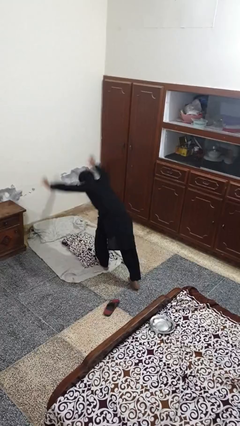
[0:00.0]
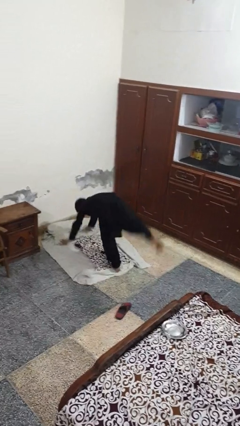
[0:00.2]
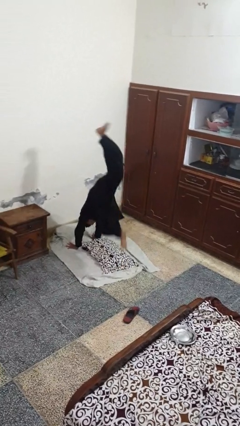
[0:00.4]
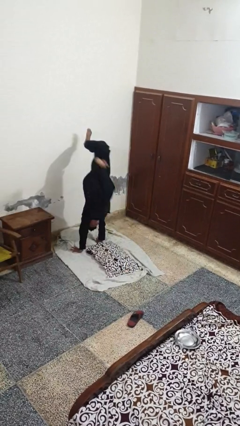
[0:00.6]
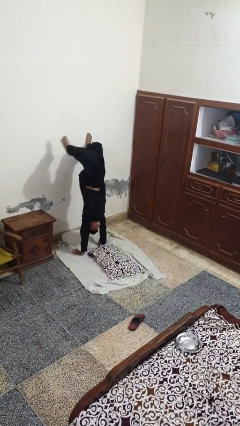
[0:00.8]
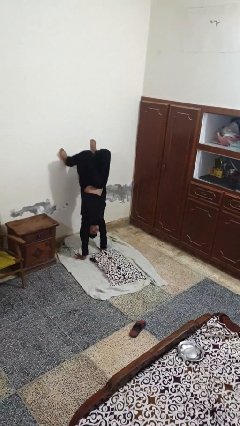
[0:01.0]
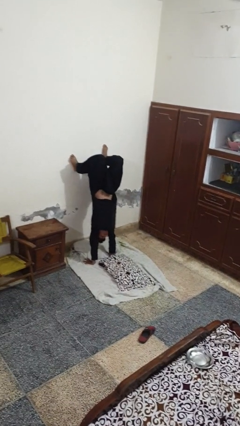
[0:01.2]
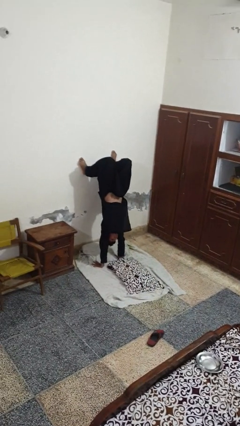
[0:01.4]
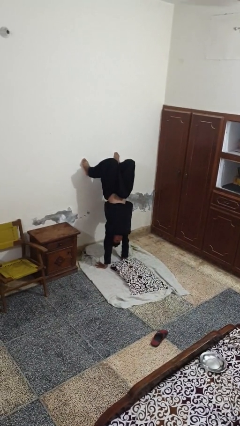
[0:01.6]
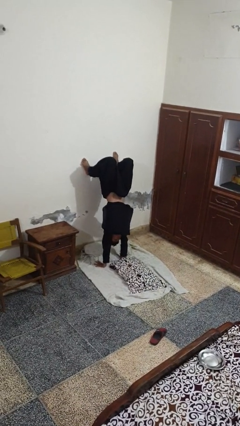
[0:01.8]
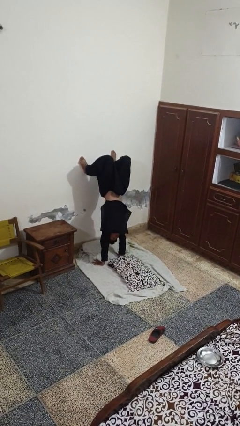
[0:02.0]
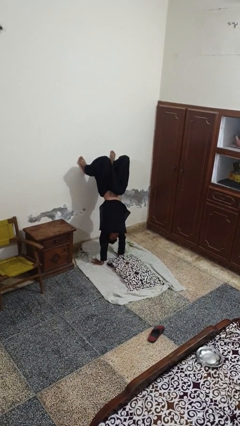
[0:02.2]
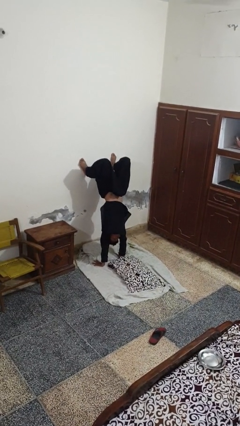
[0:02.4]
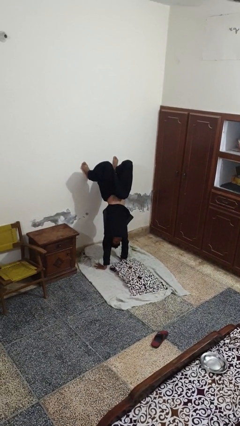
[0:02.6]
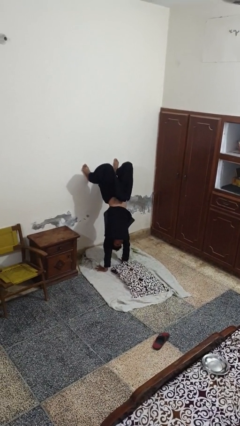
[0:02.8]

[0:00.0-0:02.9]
person handstand

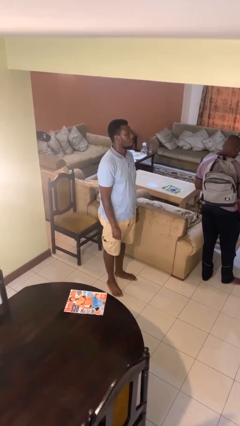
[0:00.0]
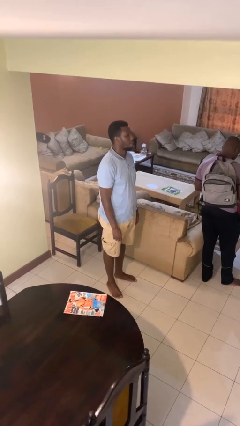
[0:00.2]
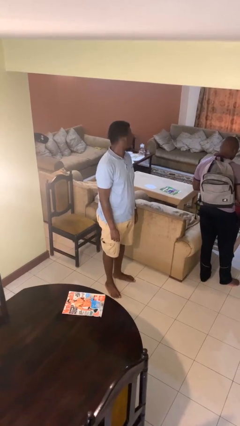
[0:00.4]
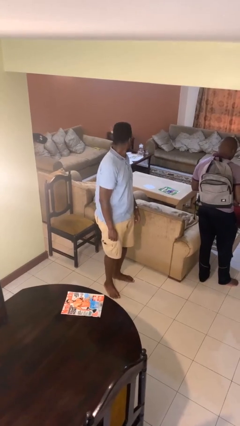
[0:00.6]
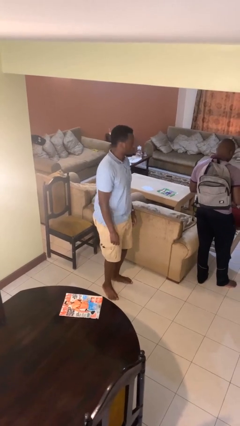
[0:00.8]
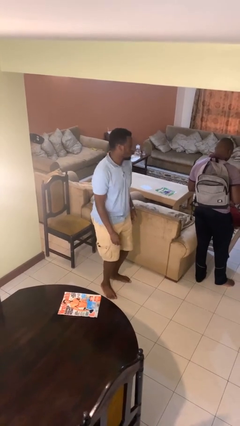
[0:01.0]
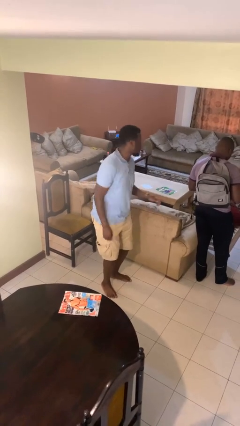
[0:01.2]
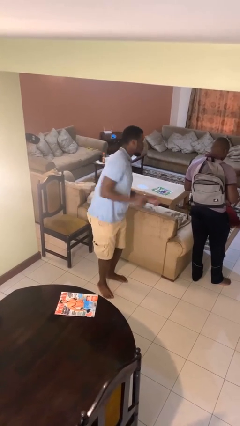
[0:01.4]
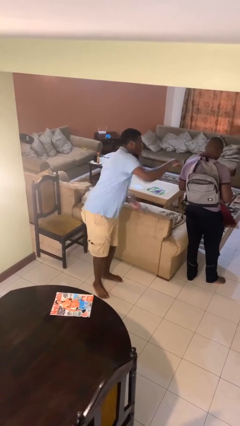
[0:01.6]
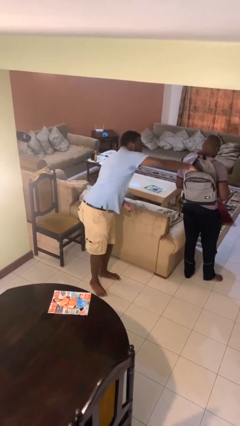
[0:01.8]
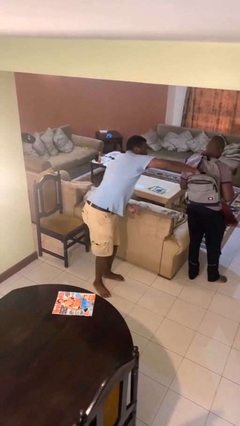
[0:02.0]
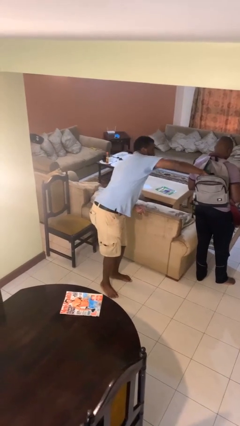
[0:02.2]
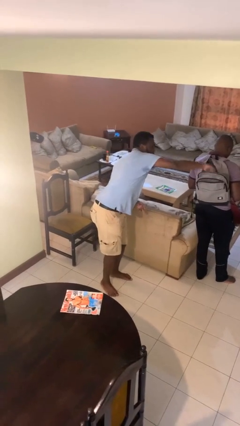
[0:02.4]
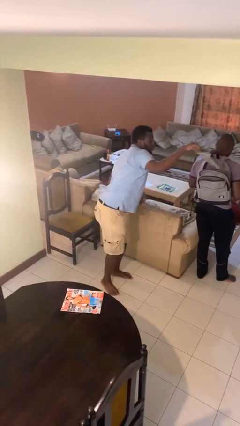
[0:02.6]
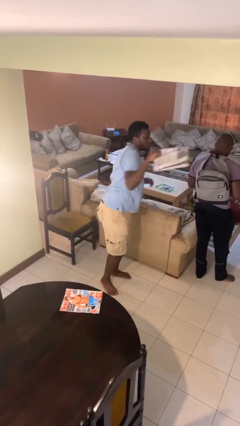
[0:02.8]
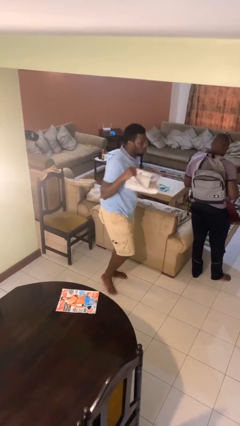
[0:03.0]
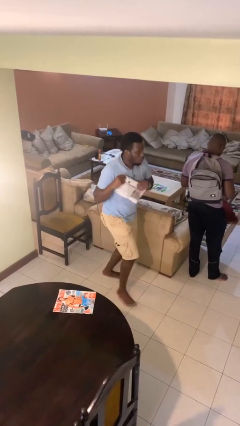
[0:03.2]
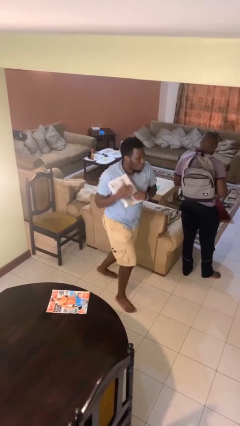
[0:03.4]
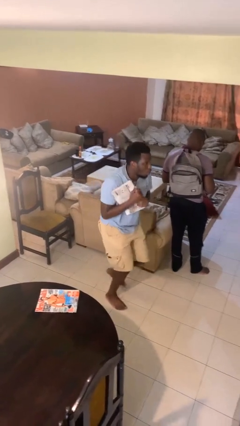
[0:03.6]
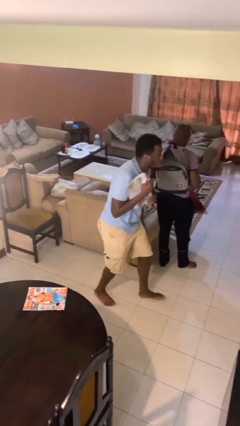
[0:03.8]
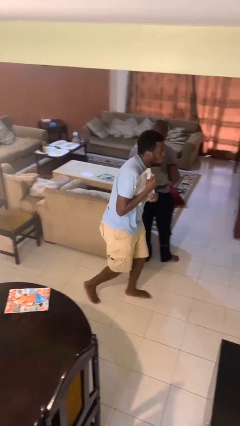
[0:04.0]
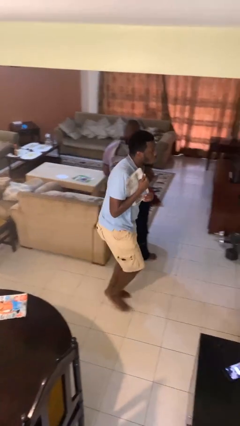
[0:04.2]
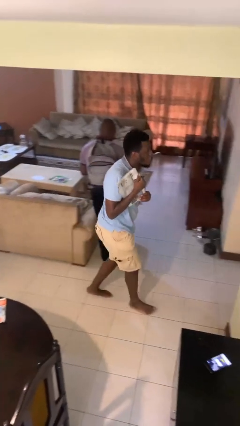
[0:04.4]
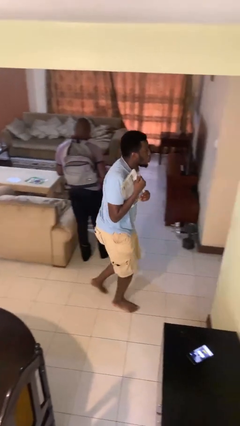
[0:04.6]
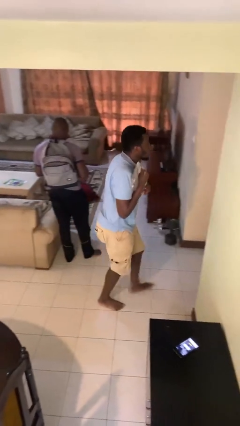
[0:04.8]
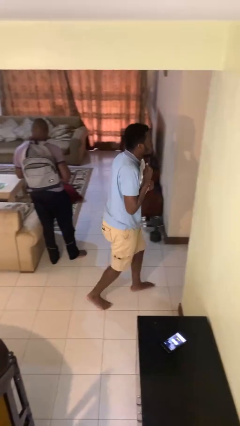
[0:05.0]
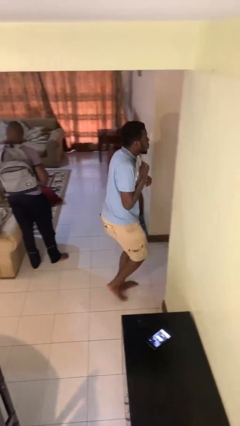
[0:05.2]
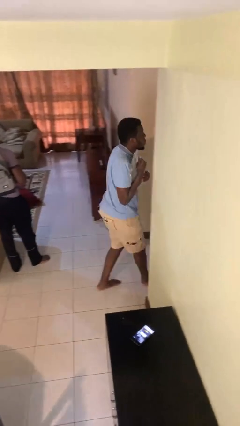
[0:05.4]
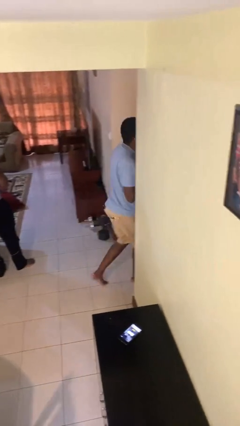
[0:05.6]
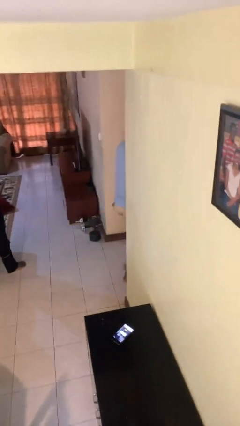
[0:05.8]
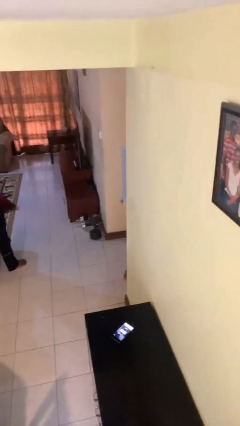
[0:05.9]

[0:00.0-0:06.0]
person steals object from person

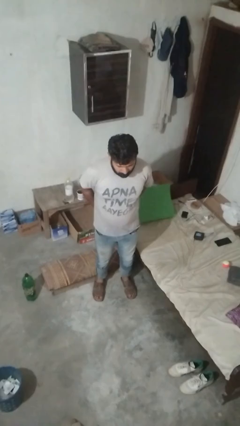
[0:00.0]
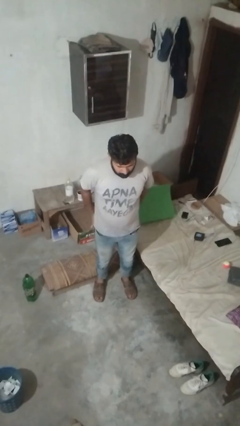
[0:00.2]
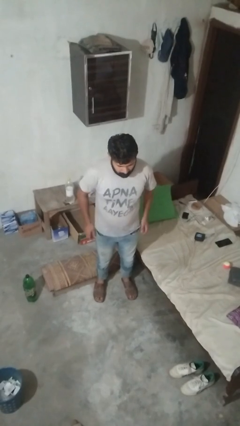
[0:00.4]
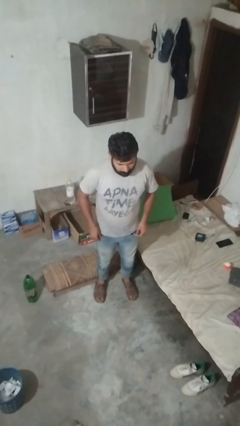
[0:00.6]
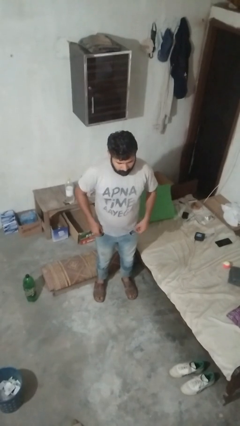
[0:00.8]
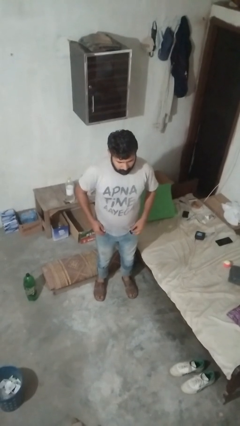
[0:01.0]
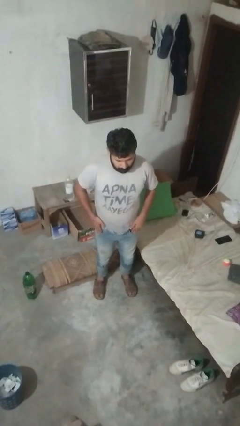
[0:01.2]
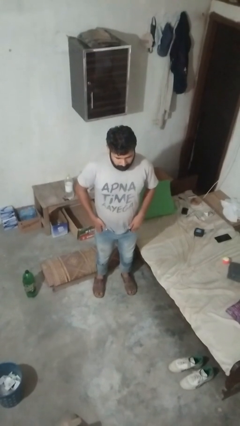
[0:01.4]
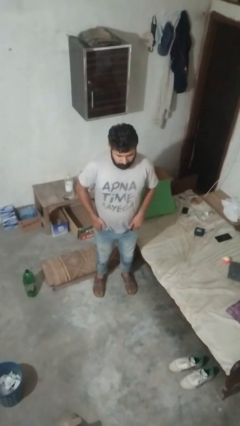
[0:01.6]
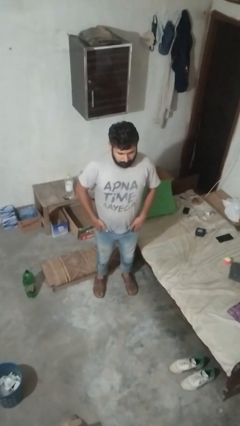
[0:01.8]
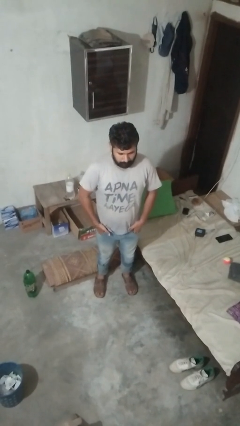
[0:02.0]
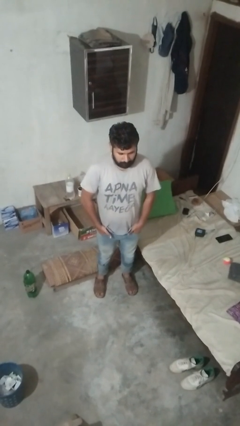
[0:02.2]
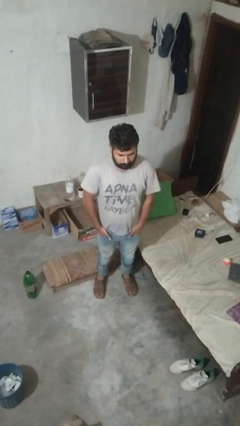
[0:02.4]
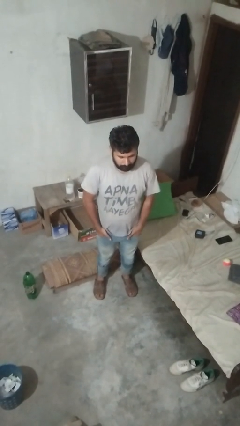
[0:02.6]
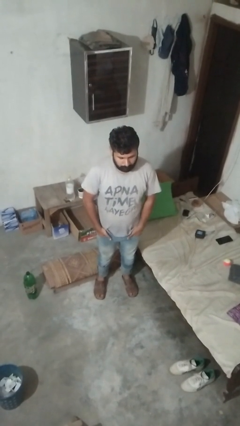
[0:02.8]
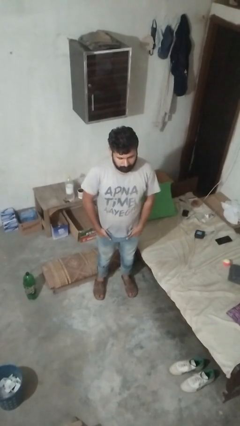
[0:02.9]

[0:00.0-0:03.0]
person puts hands in back pockets

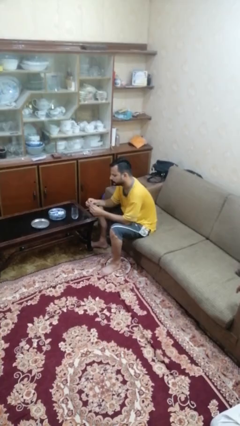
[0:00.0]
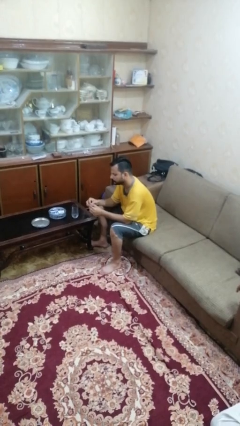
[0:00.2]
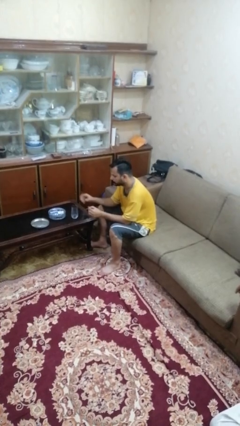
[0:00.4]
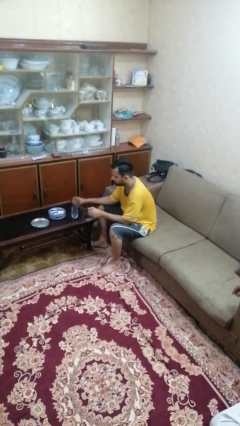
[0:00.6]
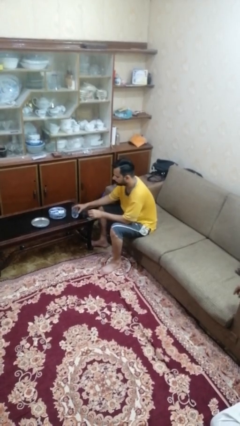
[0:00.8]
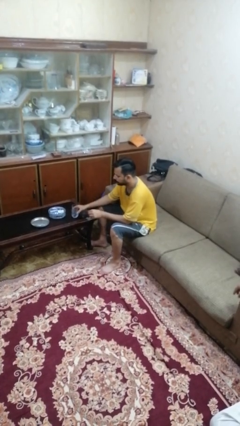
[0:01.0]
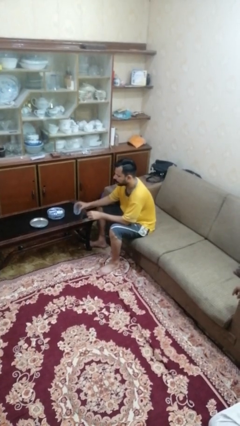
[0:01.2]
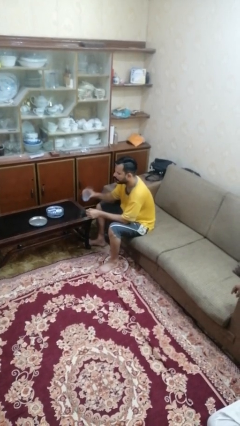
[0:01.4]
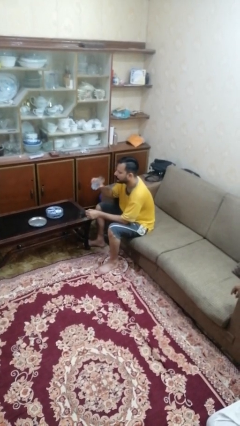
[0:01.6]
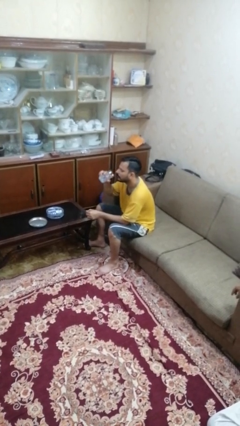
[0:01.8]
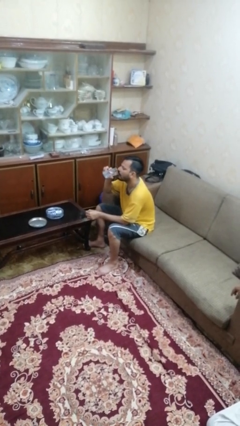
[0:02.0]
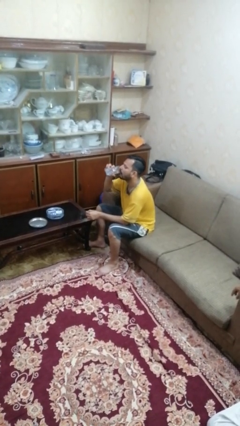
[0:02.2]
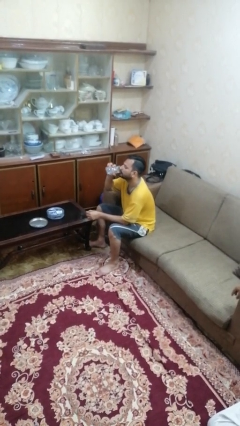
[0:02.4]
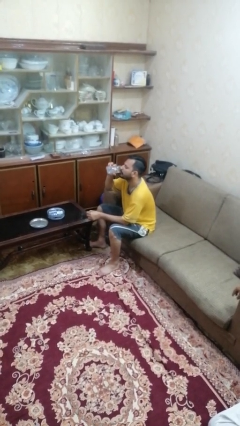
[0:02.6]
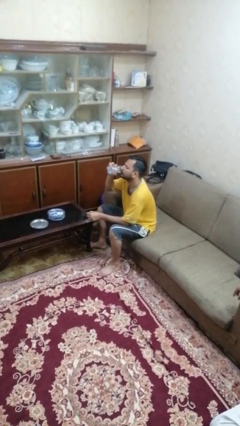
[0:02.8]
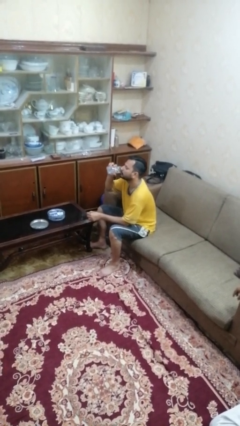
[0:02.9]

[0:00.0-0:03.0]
person drinks from cup

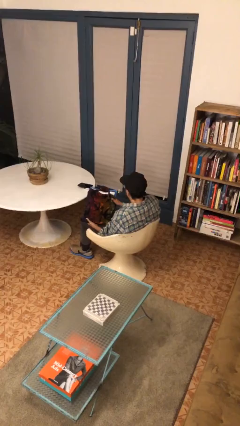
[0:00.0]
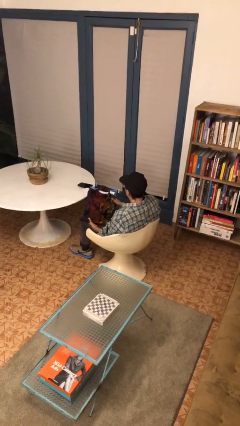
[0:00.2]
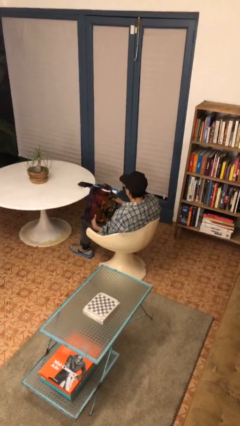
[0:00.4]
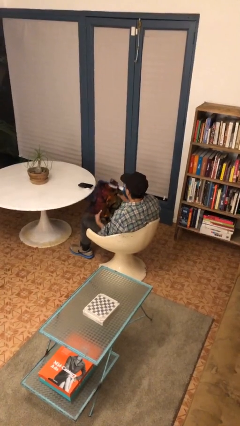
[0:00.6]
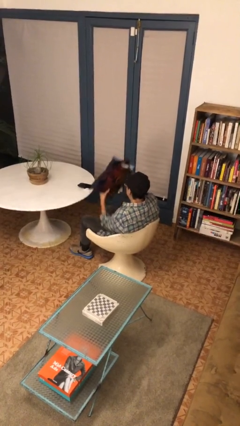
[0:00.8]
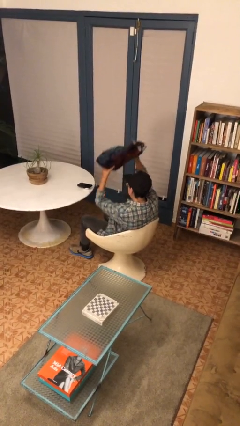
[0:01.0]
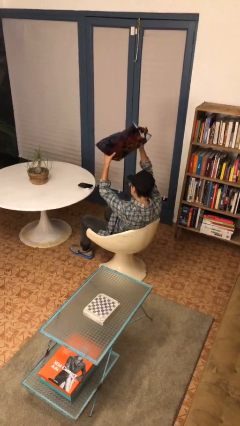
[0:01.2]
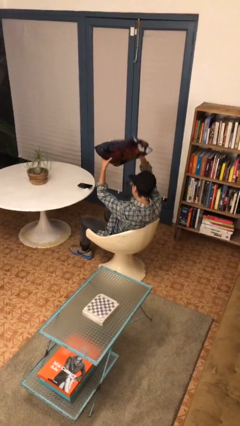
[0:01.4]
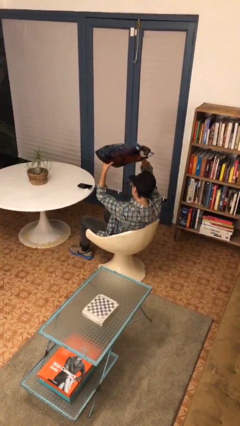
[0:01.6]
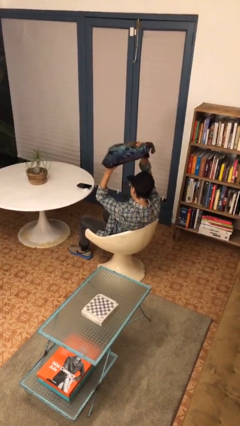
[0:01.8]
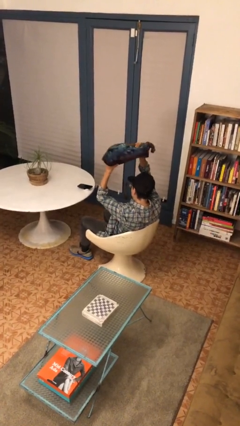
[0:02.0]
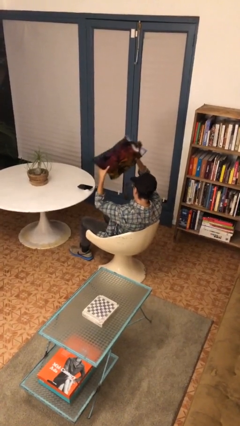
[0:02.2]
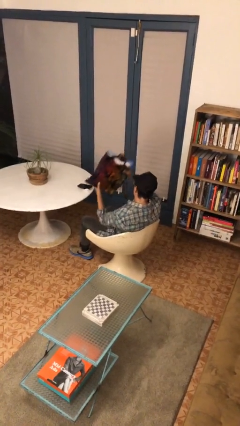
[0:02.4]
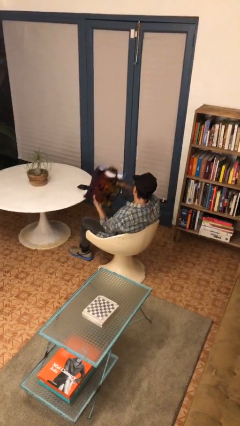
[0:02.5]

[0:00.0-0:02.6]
person holds object above head
